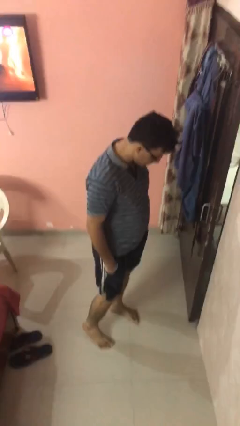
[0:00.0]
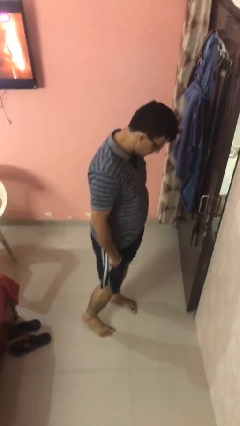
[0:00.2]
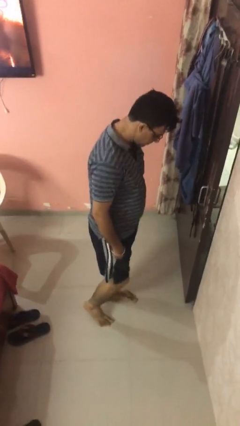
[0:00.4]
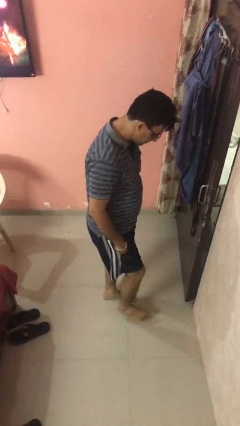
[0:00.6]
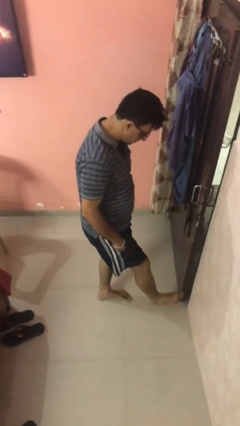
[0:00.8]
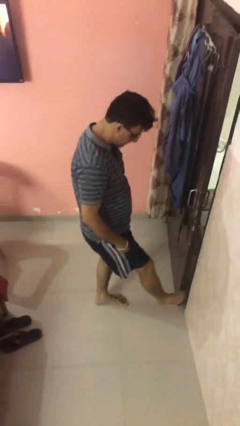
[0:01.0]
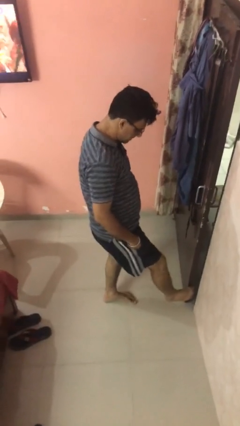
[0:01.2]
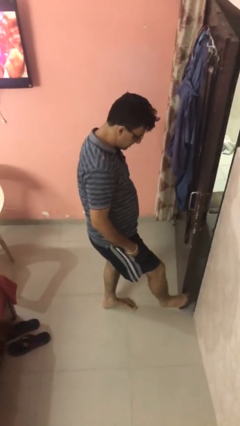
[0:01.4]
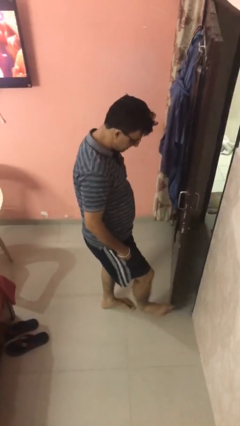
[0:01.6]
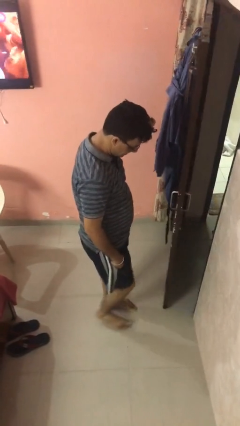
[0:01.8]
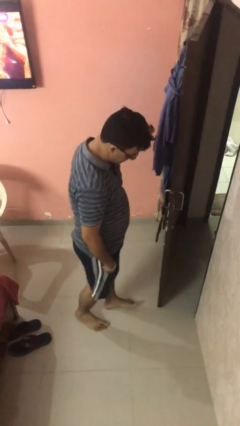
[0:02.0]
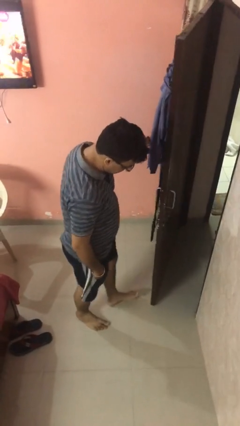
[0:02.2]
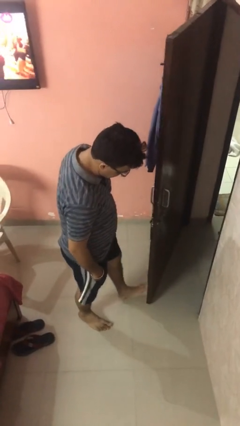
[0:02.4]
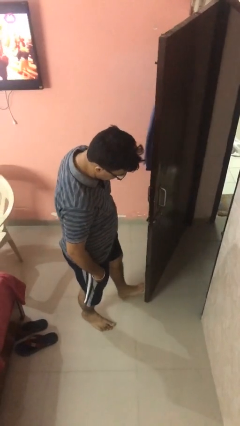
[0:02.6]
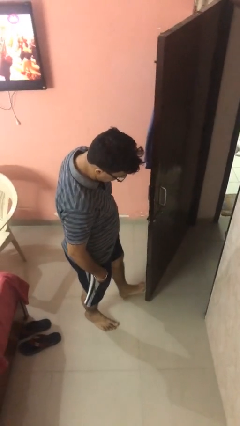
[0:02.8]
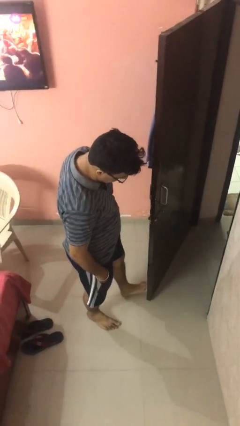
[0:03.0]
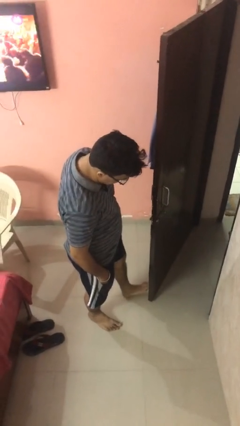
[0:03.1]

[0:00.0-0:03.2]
person opens facility door

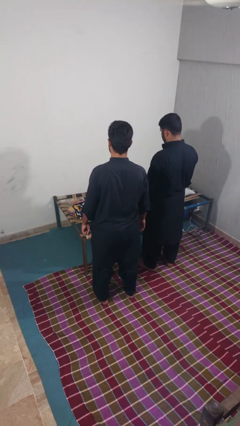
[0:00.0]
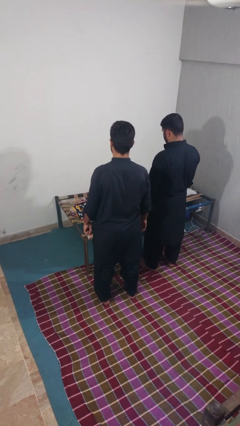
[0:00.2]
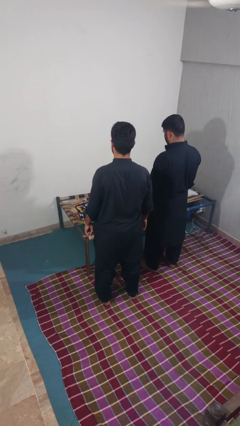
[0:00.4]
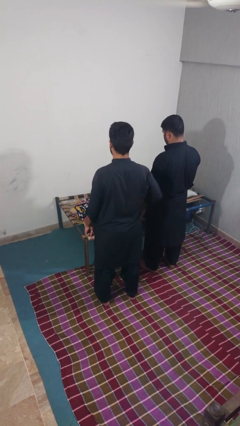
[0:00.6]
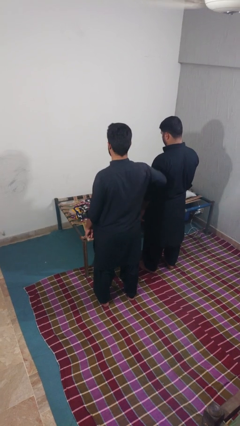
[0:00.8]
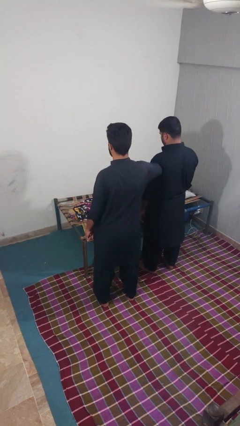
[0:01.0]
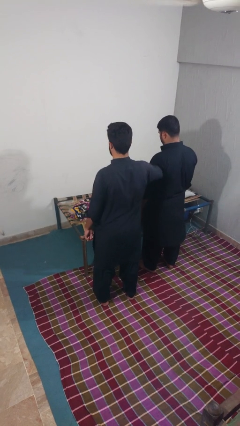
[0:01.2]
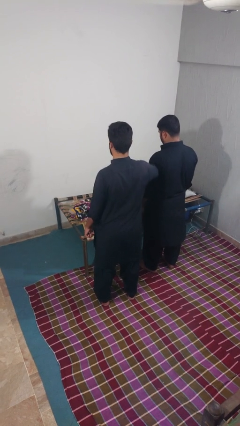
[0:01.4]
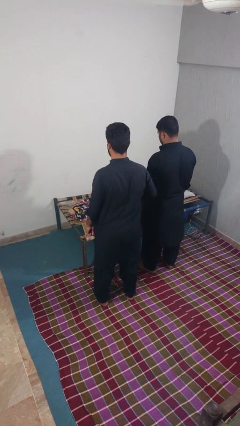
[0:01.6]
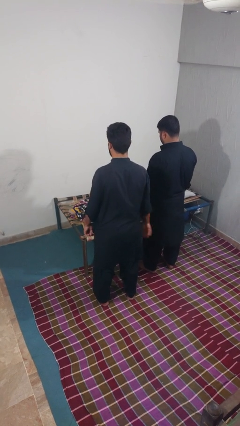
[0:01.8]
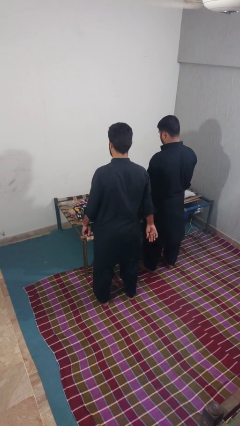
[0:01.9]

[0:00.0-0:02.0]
person nudges person with elbow

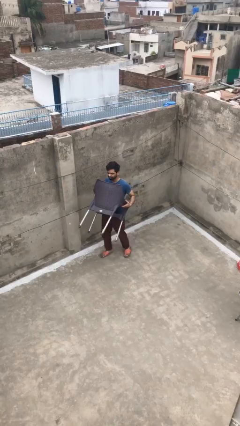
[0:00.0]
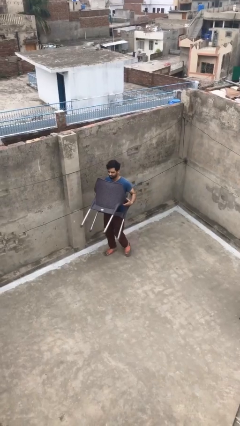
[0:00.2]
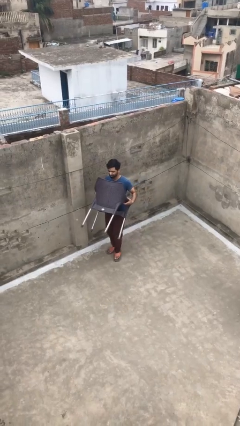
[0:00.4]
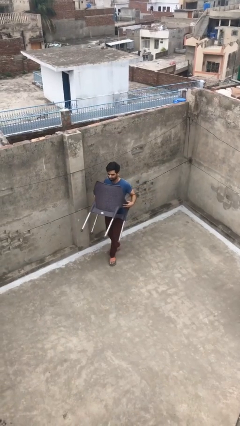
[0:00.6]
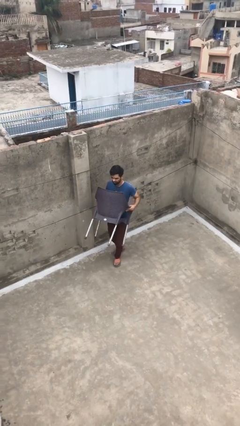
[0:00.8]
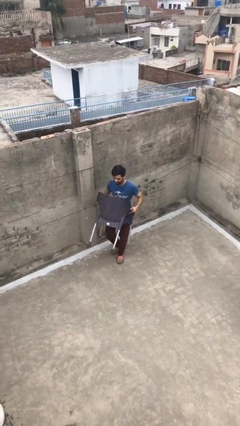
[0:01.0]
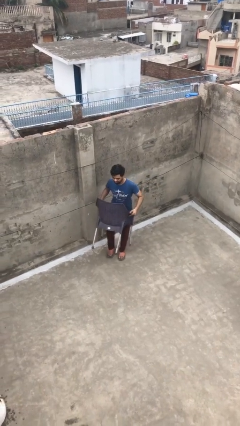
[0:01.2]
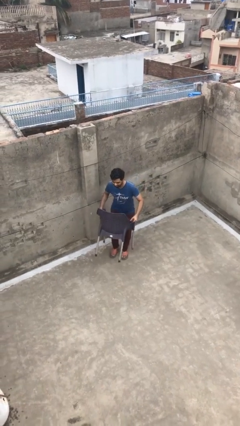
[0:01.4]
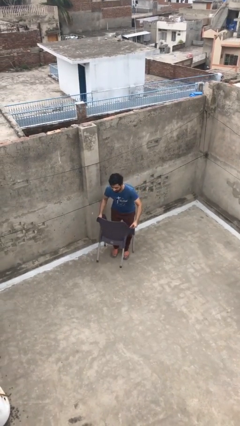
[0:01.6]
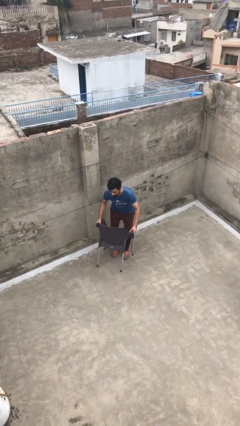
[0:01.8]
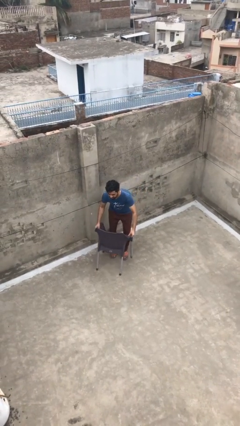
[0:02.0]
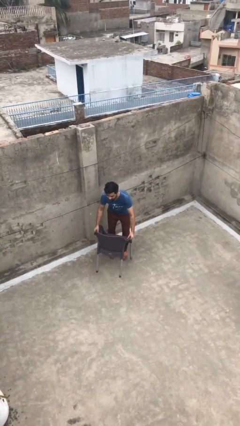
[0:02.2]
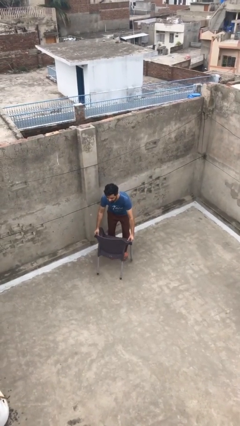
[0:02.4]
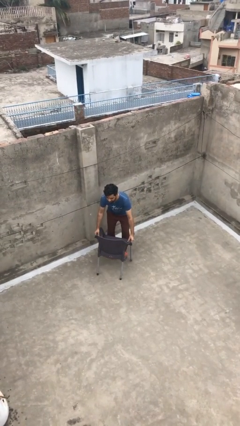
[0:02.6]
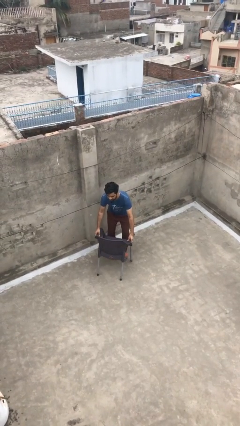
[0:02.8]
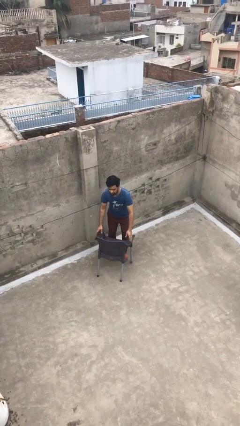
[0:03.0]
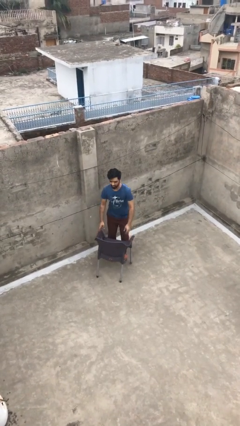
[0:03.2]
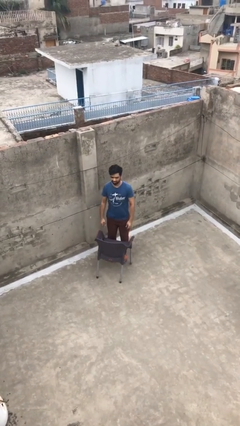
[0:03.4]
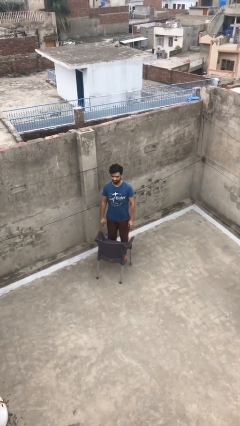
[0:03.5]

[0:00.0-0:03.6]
person puts down object on floor

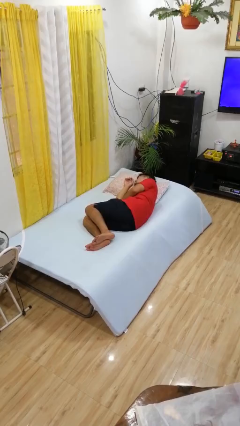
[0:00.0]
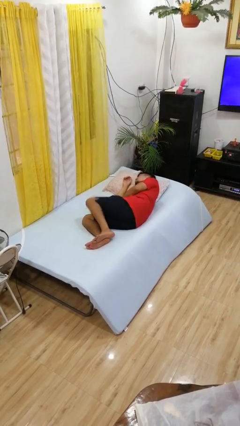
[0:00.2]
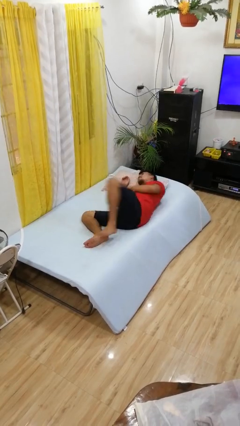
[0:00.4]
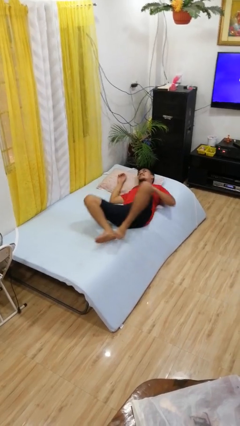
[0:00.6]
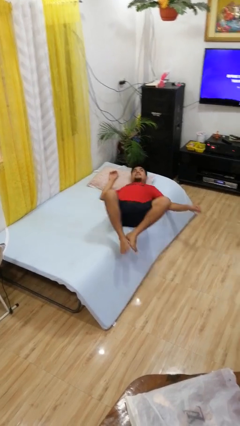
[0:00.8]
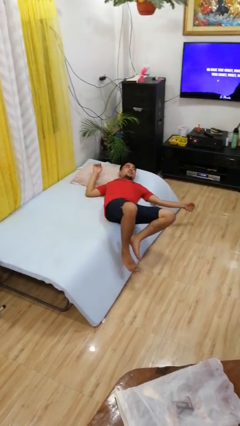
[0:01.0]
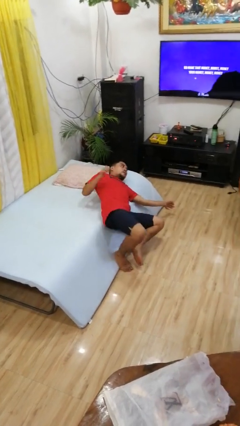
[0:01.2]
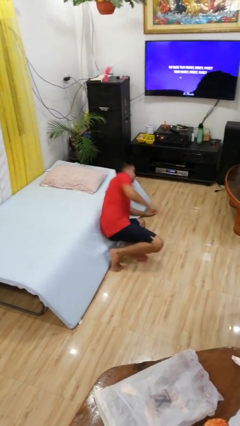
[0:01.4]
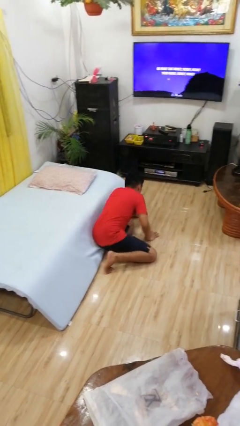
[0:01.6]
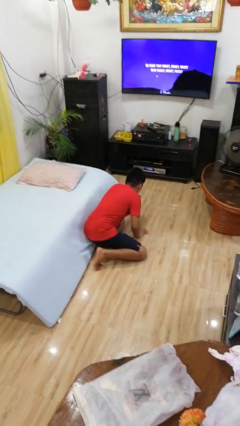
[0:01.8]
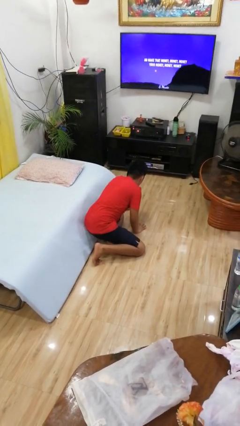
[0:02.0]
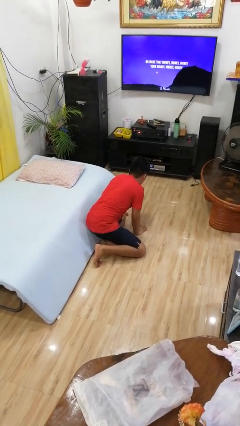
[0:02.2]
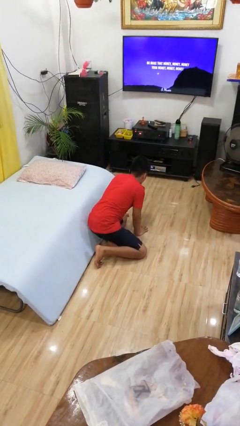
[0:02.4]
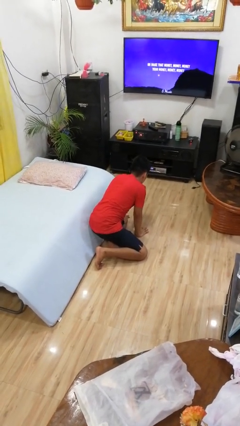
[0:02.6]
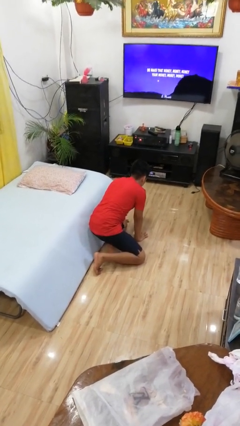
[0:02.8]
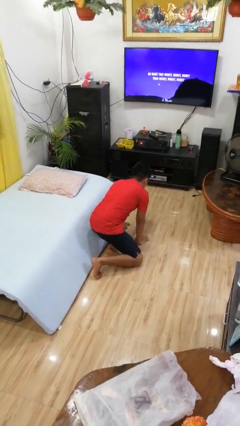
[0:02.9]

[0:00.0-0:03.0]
person falls from bed

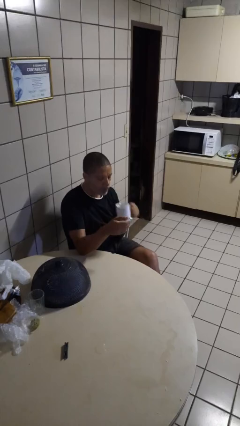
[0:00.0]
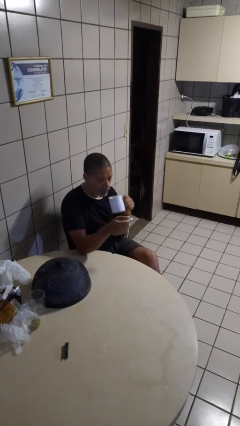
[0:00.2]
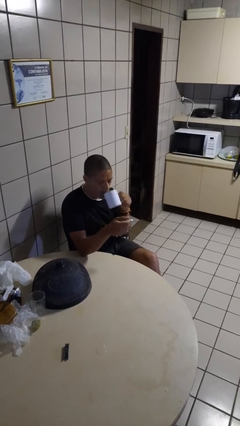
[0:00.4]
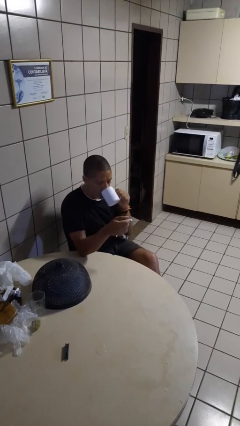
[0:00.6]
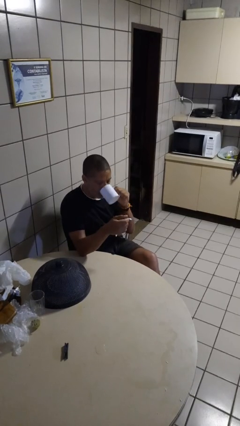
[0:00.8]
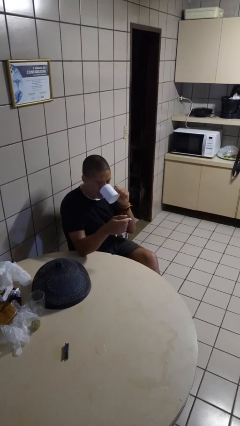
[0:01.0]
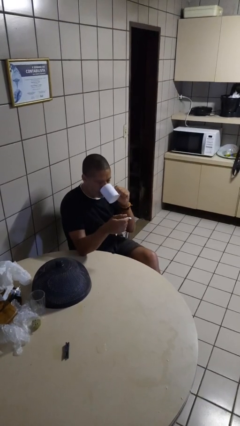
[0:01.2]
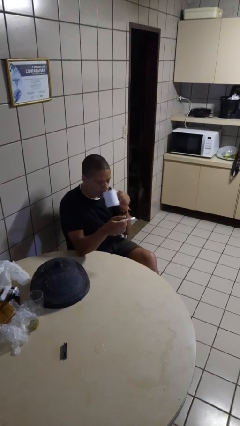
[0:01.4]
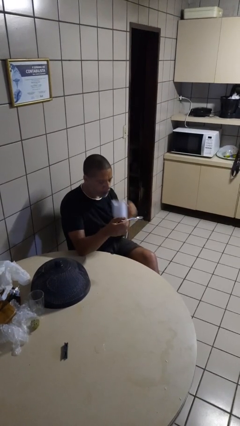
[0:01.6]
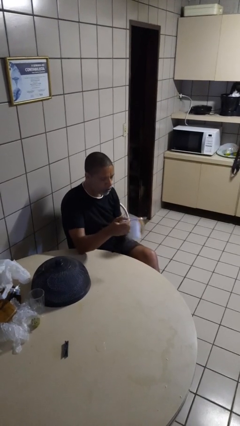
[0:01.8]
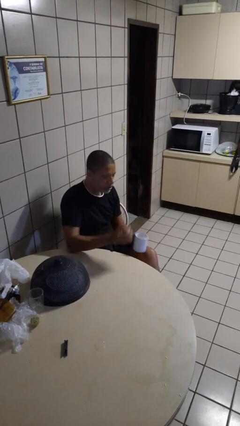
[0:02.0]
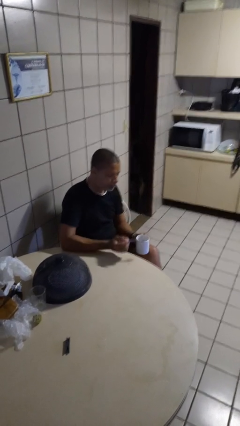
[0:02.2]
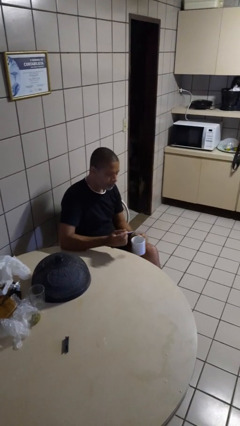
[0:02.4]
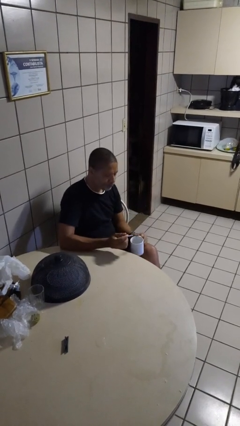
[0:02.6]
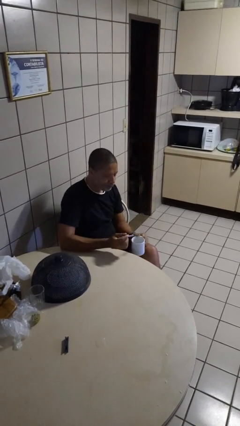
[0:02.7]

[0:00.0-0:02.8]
person drinks from mug

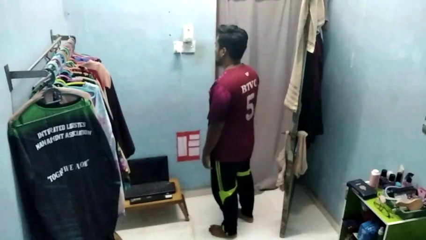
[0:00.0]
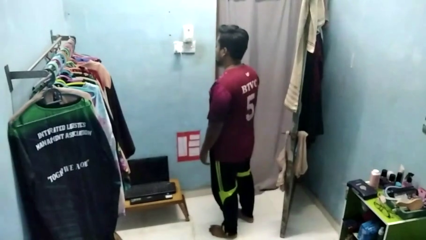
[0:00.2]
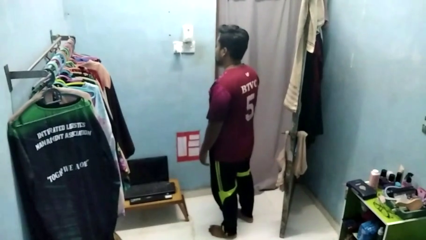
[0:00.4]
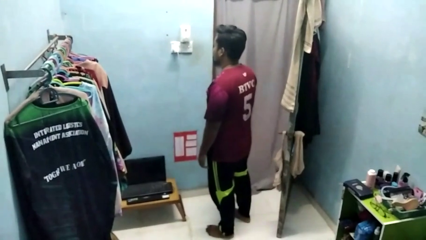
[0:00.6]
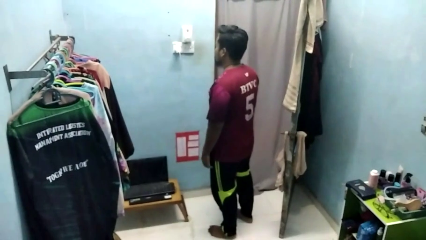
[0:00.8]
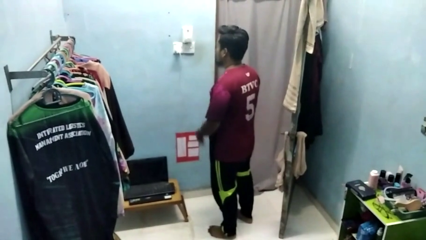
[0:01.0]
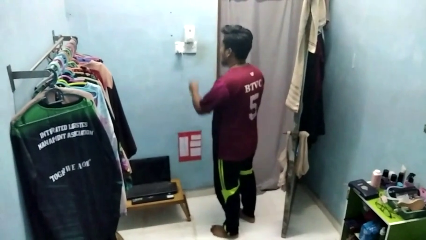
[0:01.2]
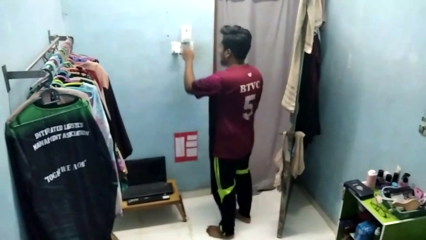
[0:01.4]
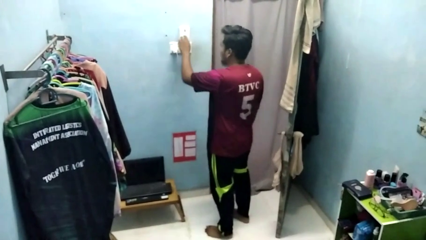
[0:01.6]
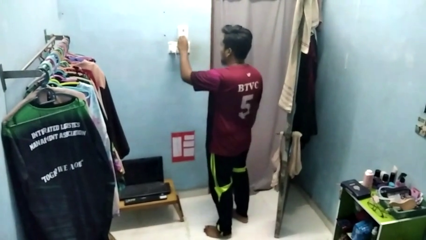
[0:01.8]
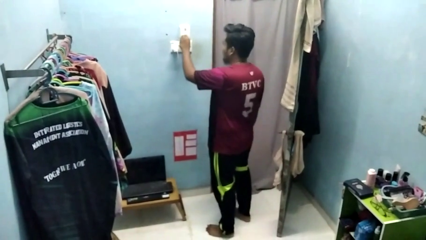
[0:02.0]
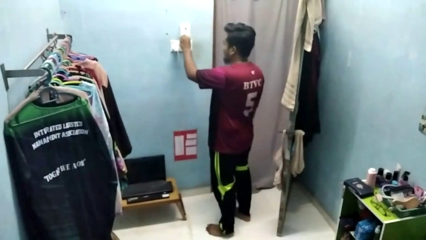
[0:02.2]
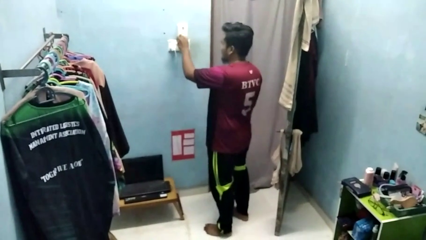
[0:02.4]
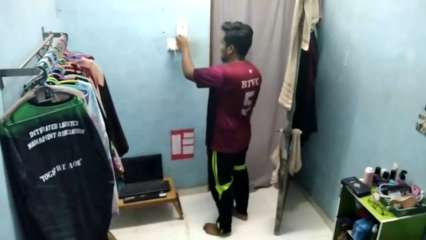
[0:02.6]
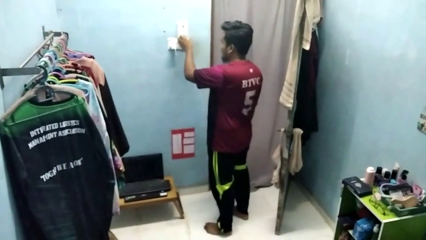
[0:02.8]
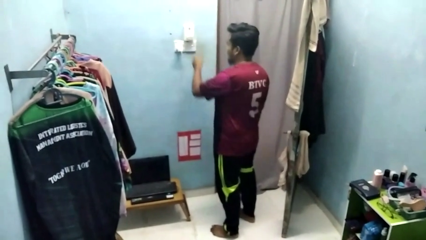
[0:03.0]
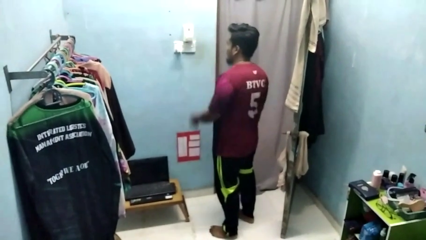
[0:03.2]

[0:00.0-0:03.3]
person adjusts thermostat
